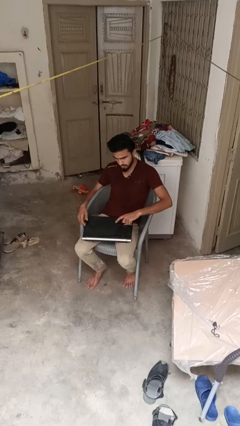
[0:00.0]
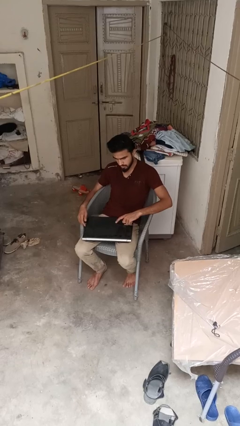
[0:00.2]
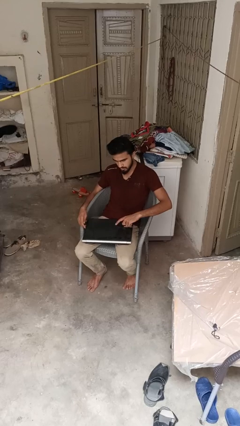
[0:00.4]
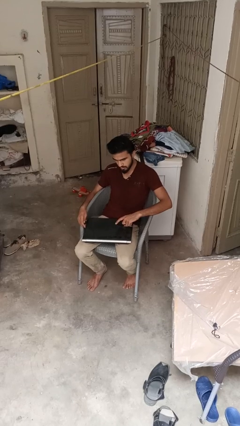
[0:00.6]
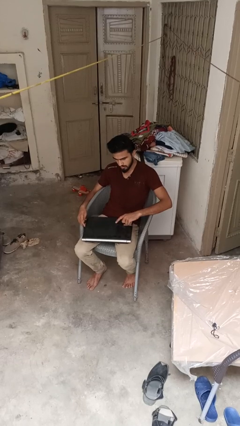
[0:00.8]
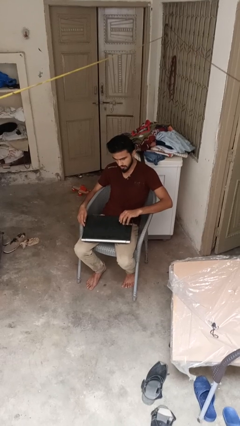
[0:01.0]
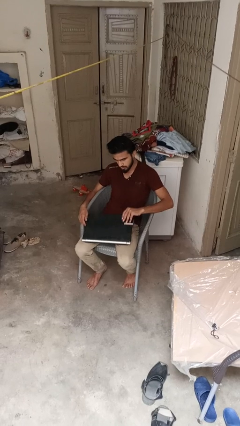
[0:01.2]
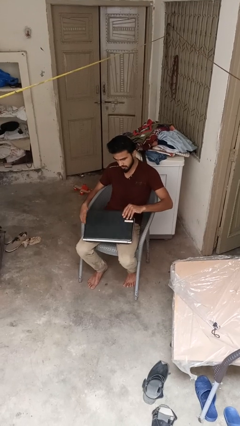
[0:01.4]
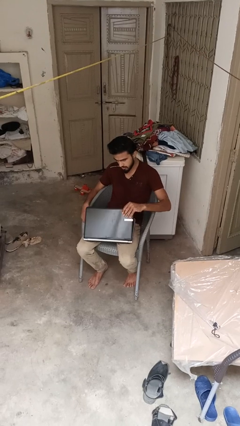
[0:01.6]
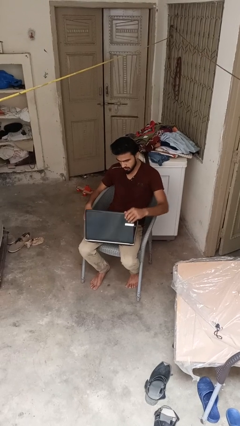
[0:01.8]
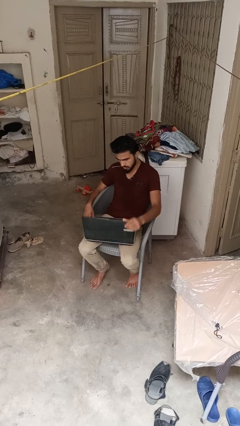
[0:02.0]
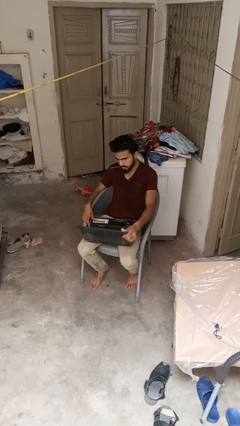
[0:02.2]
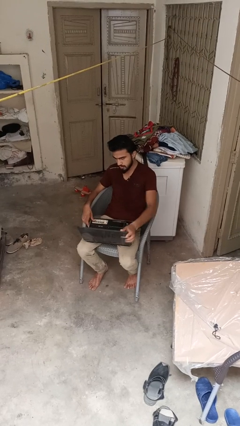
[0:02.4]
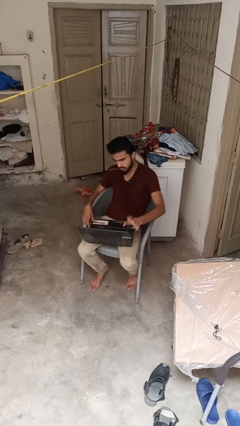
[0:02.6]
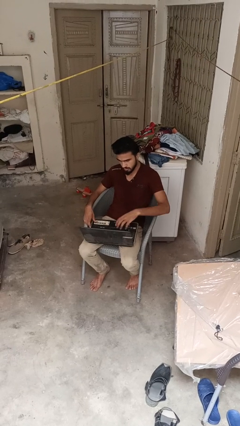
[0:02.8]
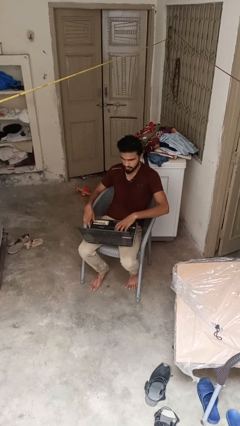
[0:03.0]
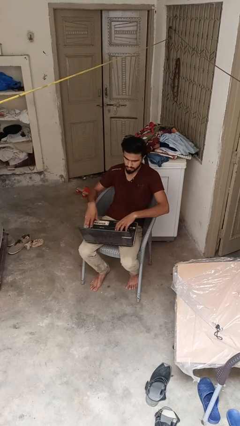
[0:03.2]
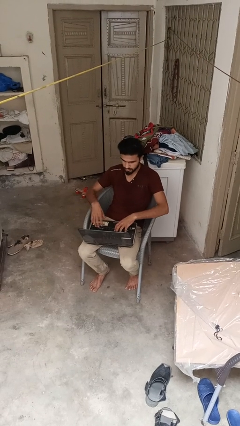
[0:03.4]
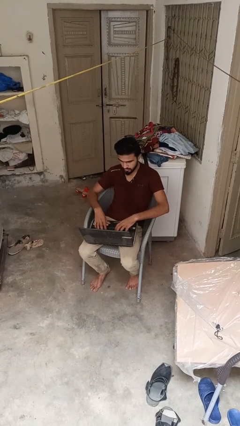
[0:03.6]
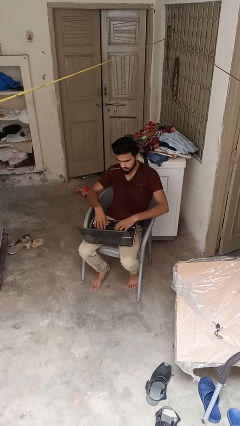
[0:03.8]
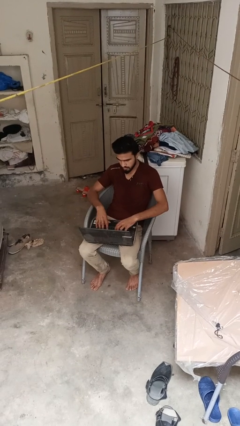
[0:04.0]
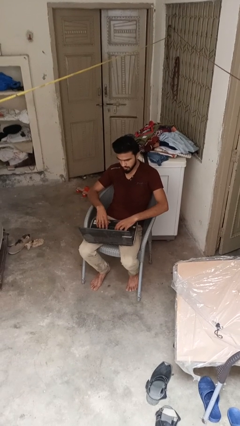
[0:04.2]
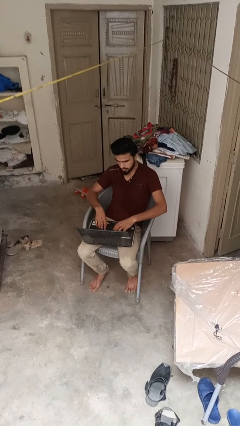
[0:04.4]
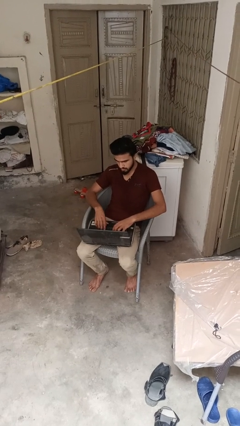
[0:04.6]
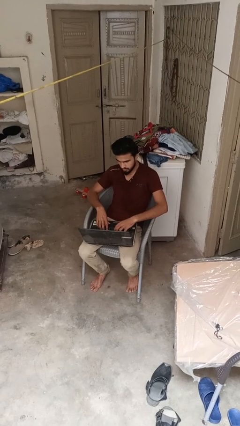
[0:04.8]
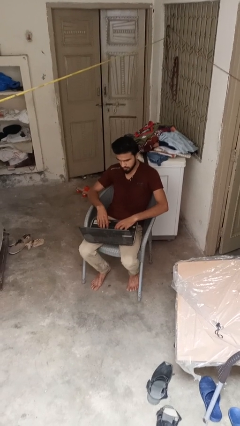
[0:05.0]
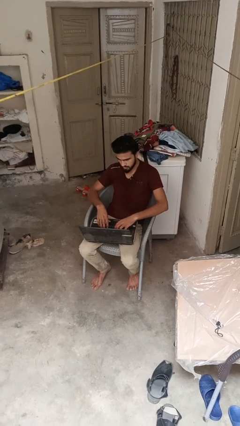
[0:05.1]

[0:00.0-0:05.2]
person opens laptop

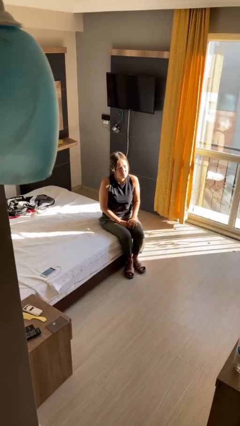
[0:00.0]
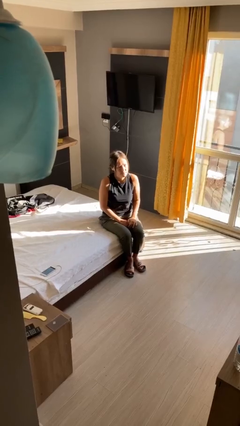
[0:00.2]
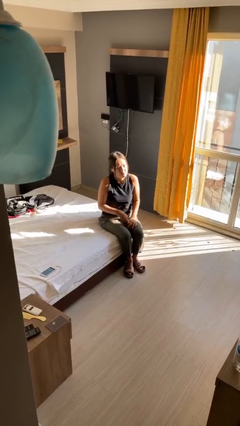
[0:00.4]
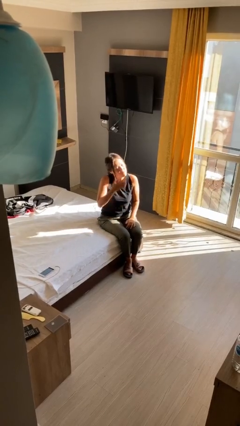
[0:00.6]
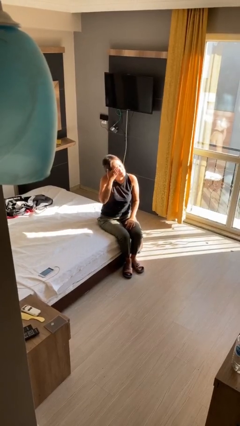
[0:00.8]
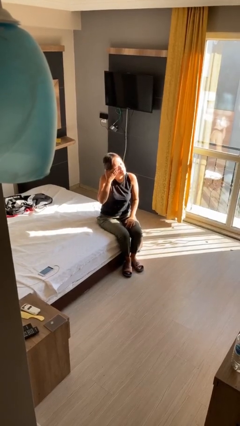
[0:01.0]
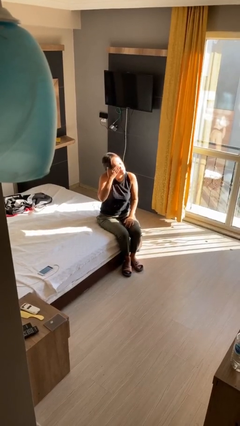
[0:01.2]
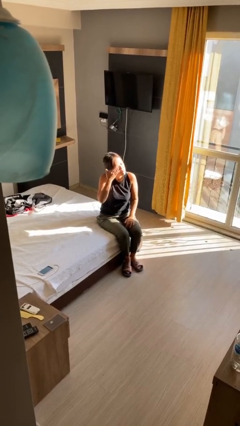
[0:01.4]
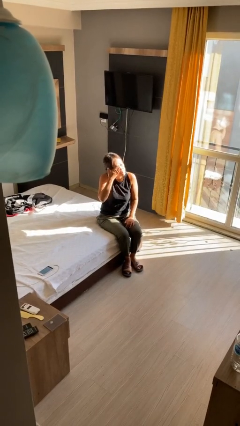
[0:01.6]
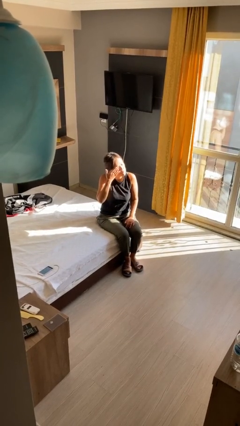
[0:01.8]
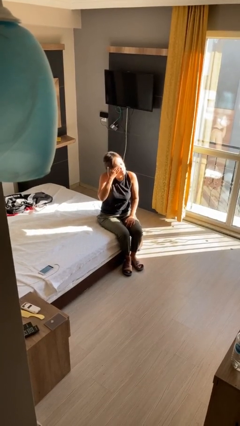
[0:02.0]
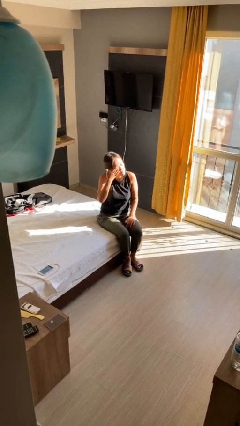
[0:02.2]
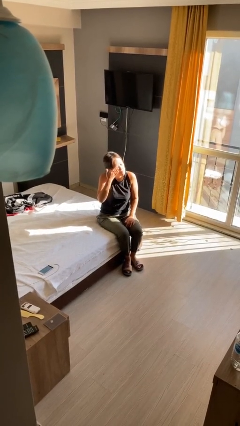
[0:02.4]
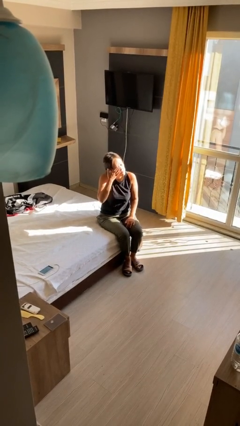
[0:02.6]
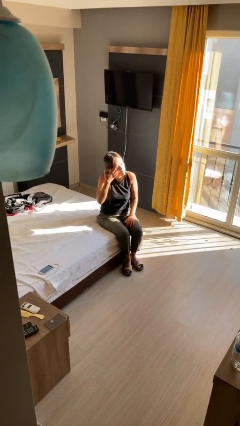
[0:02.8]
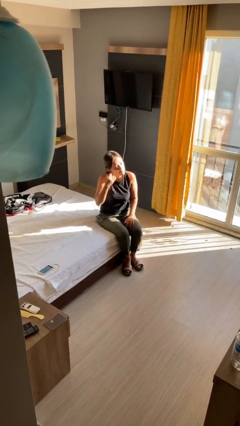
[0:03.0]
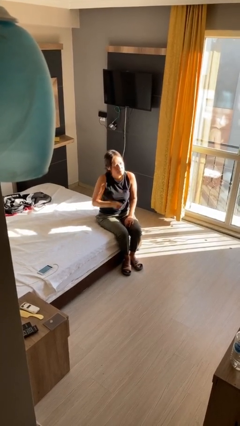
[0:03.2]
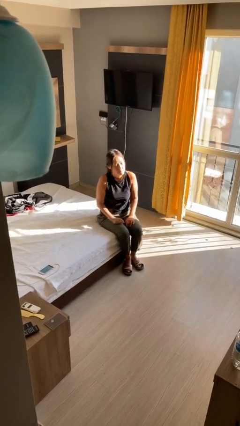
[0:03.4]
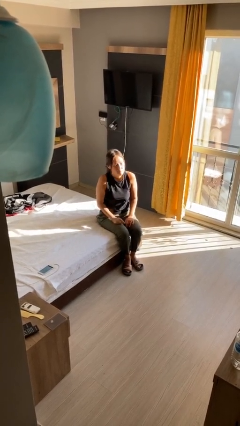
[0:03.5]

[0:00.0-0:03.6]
person rubs eyes

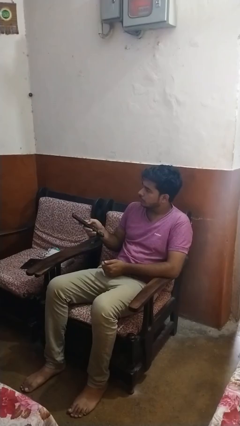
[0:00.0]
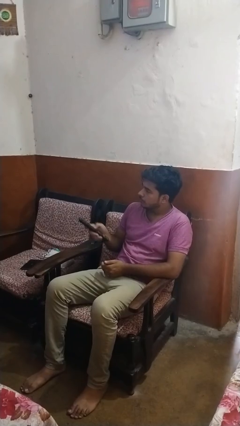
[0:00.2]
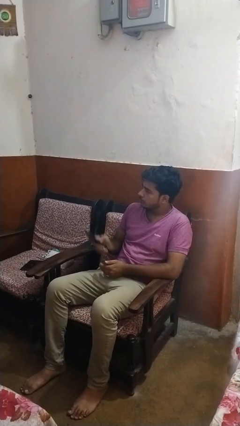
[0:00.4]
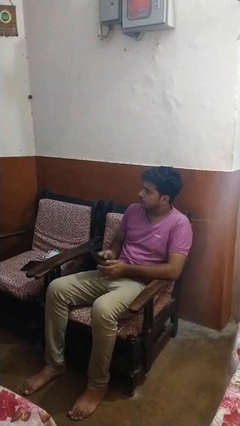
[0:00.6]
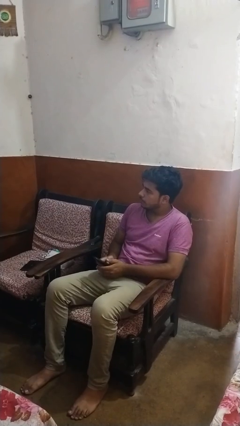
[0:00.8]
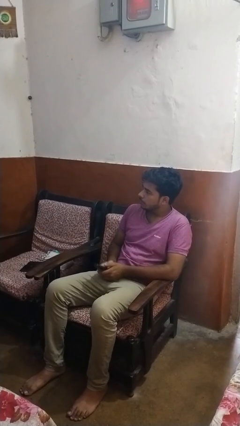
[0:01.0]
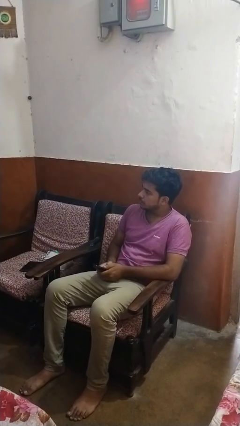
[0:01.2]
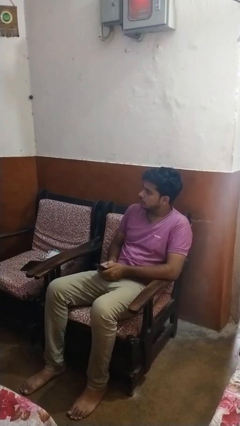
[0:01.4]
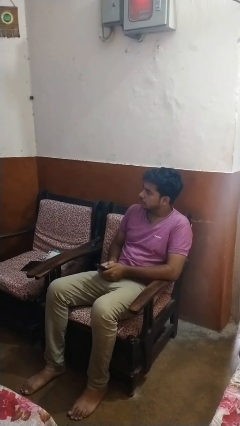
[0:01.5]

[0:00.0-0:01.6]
person uses television remote

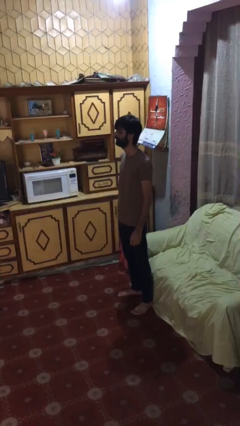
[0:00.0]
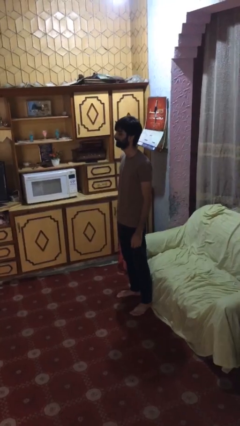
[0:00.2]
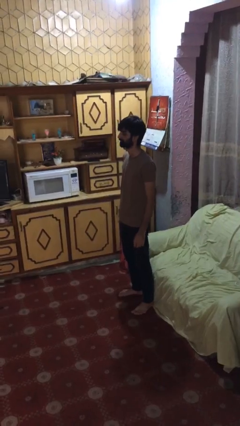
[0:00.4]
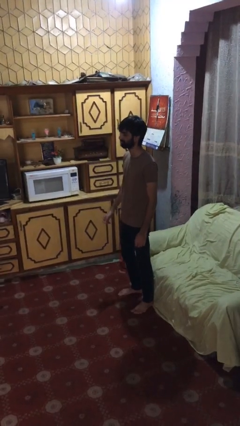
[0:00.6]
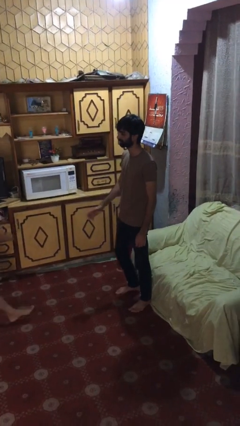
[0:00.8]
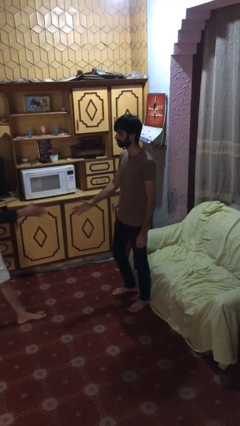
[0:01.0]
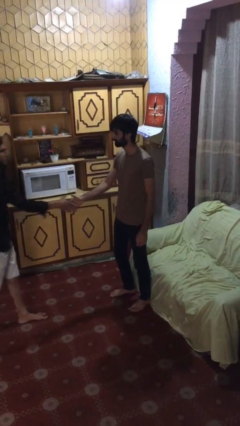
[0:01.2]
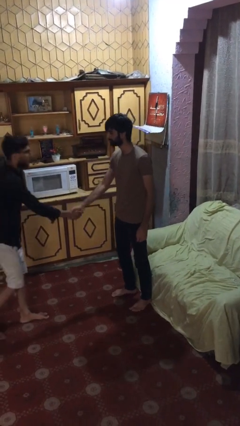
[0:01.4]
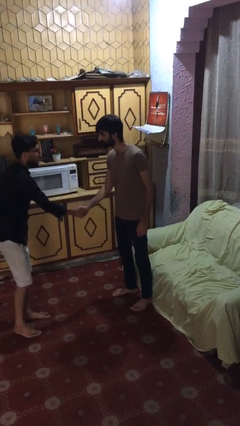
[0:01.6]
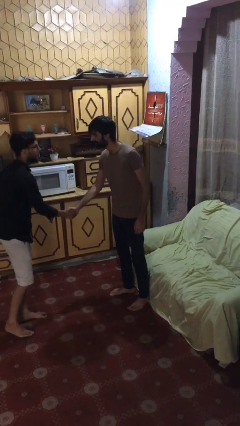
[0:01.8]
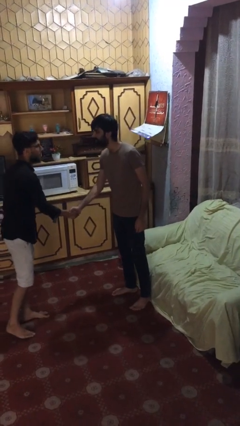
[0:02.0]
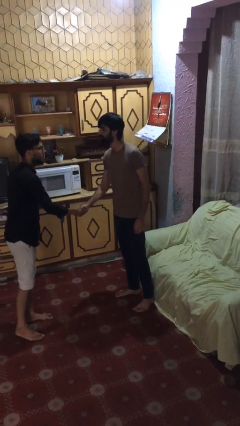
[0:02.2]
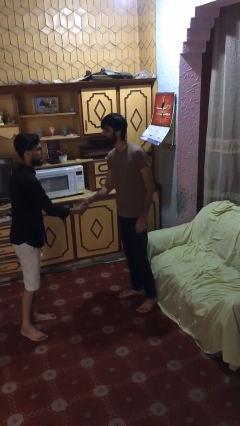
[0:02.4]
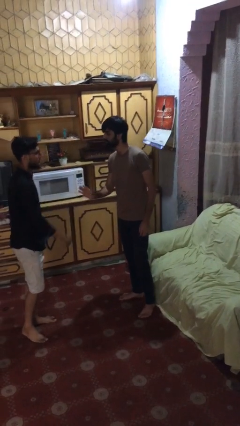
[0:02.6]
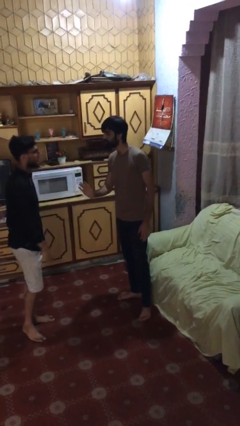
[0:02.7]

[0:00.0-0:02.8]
person shakes hand

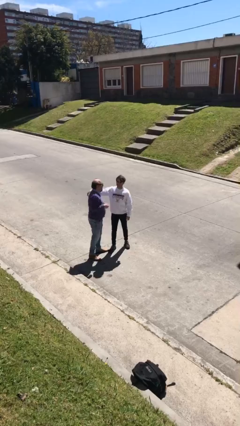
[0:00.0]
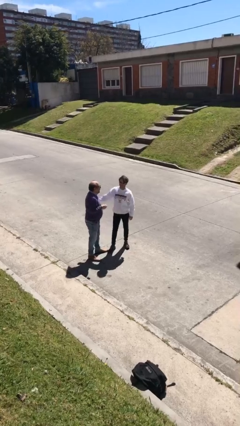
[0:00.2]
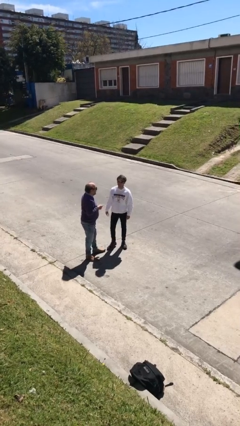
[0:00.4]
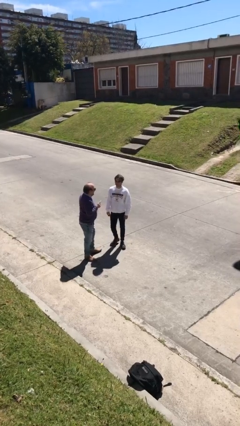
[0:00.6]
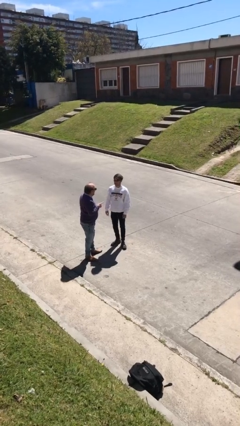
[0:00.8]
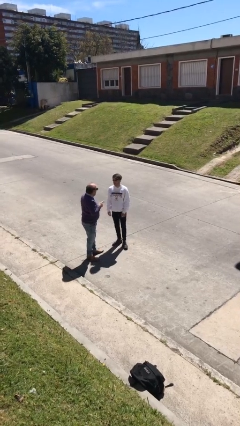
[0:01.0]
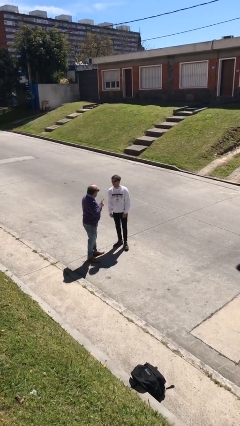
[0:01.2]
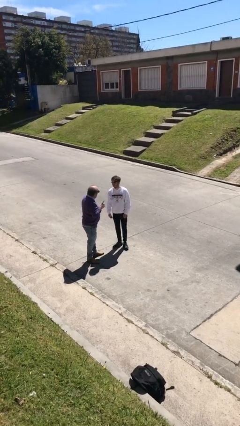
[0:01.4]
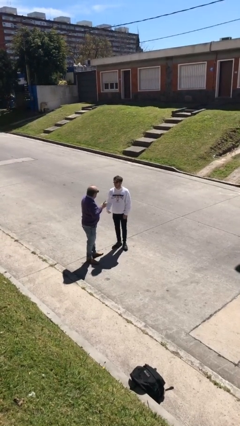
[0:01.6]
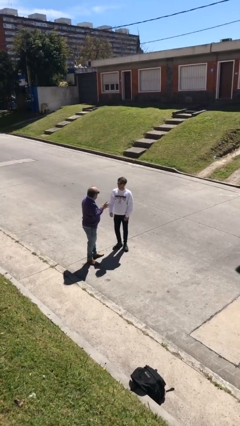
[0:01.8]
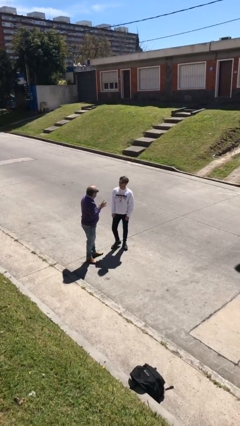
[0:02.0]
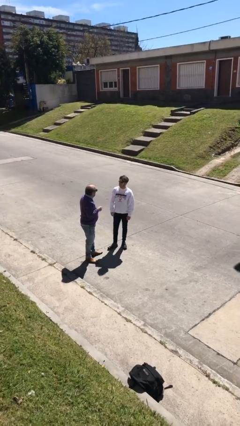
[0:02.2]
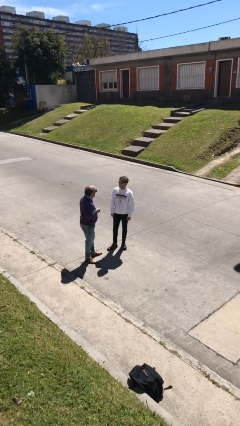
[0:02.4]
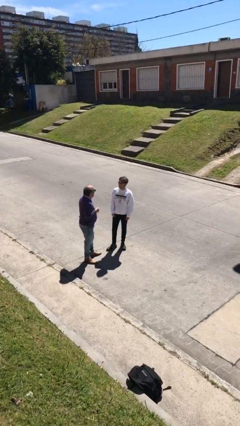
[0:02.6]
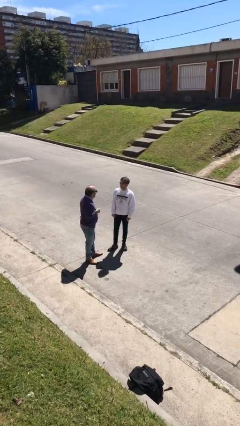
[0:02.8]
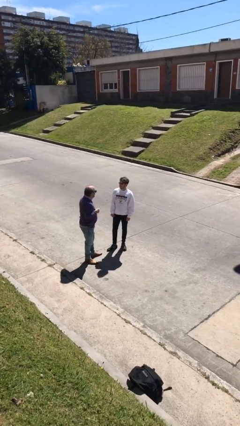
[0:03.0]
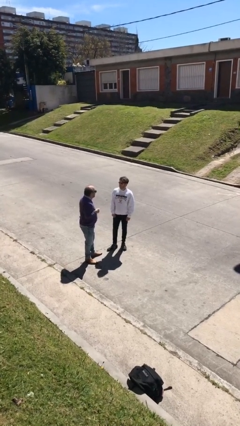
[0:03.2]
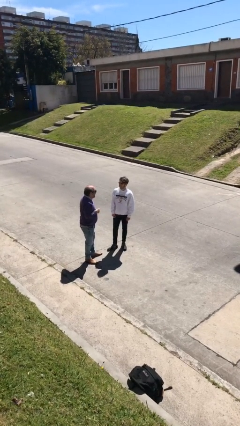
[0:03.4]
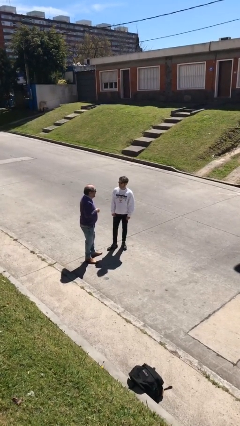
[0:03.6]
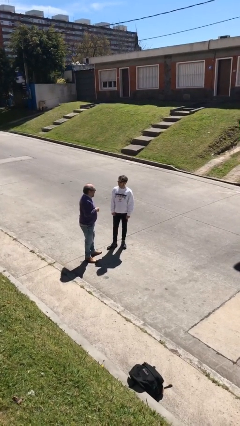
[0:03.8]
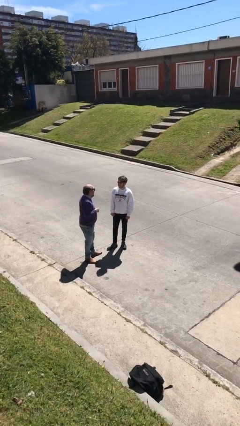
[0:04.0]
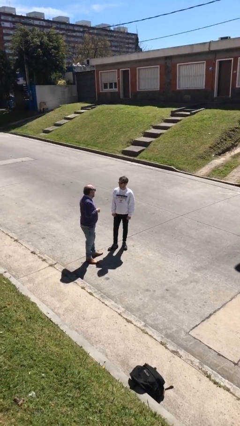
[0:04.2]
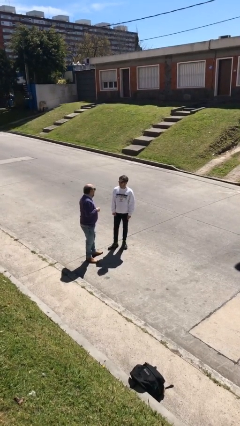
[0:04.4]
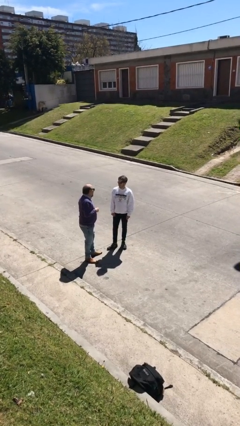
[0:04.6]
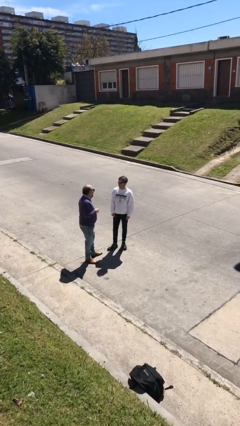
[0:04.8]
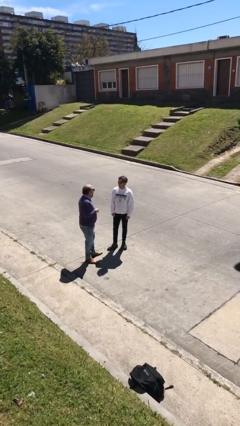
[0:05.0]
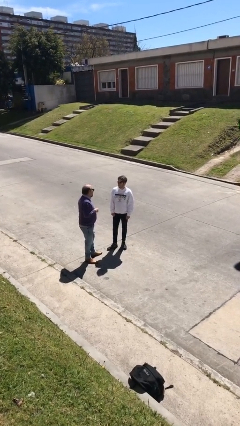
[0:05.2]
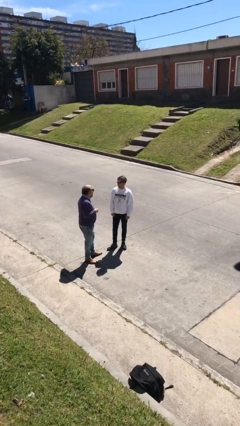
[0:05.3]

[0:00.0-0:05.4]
person talks to person
